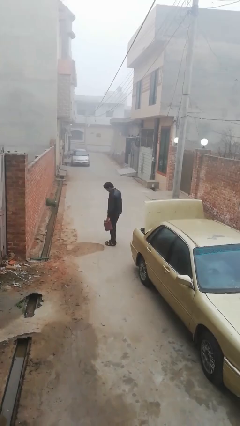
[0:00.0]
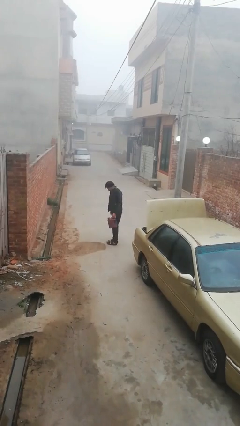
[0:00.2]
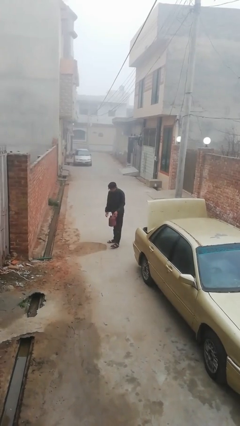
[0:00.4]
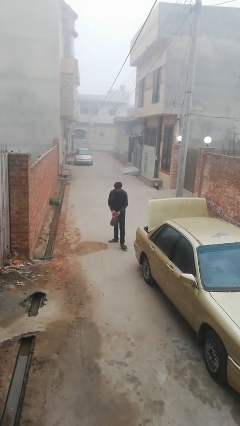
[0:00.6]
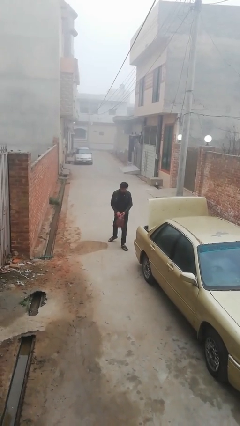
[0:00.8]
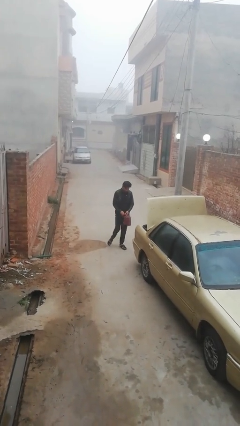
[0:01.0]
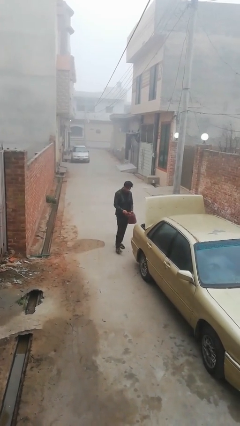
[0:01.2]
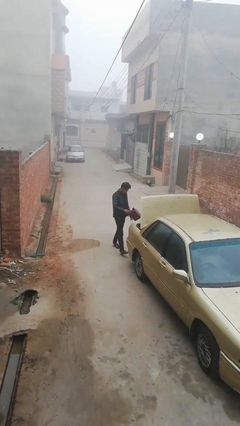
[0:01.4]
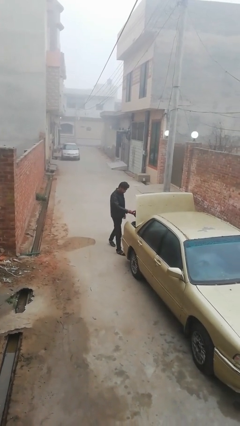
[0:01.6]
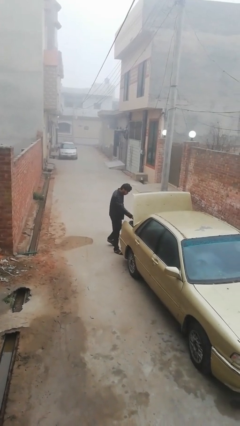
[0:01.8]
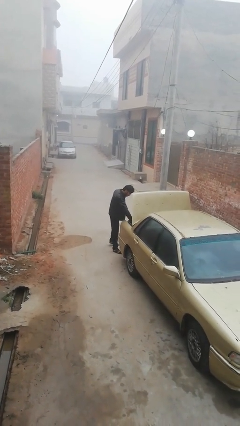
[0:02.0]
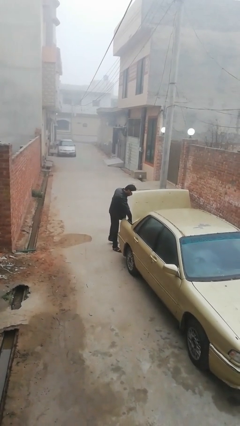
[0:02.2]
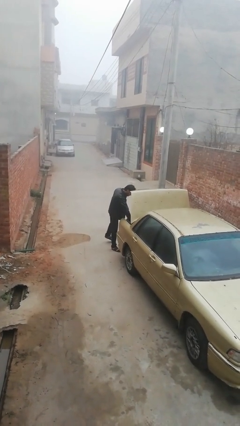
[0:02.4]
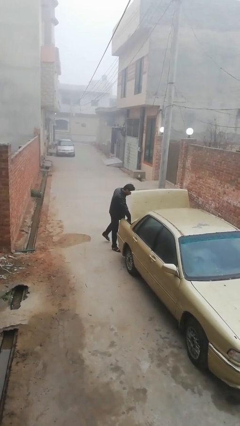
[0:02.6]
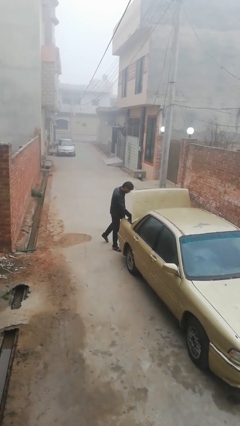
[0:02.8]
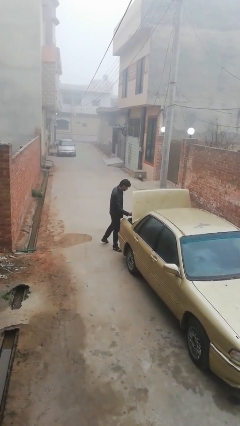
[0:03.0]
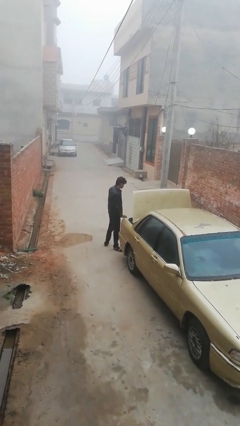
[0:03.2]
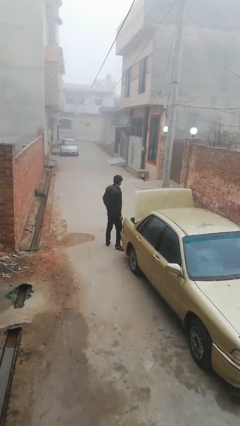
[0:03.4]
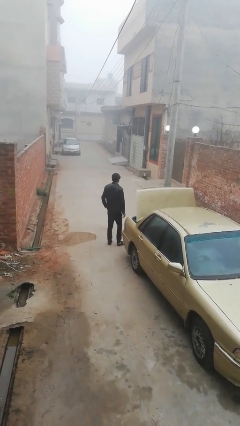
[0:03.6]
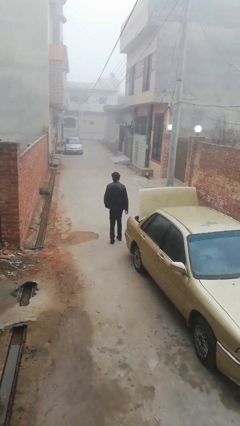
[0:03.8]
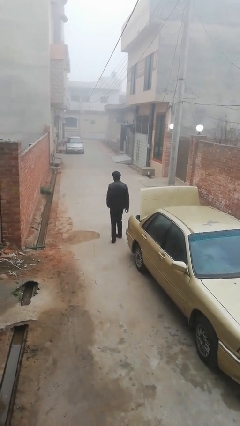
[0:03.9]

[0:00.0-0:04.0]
person loads car

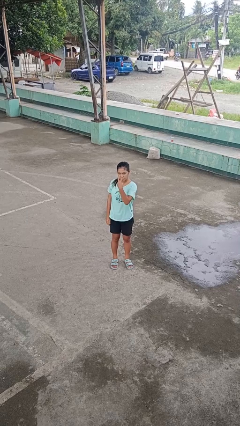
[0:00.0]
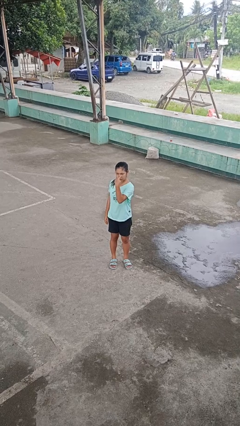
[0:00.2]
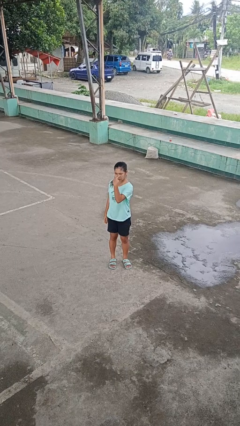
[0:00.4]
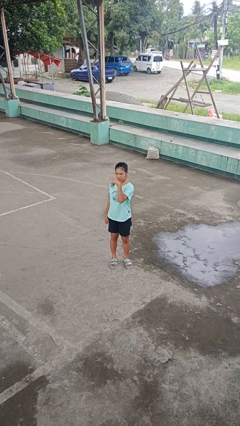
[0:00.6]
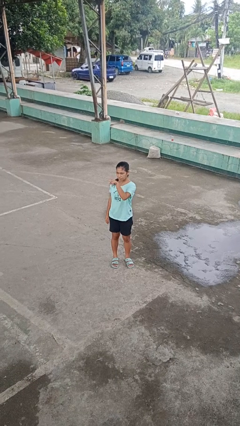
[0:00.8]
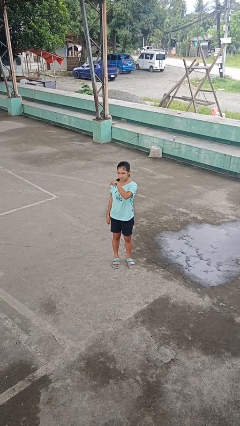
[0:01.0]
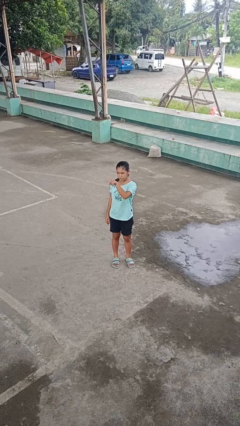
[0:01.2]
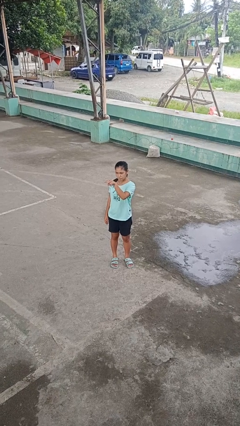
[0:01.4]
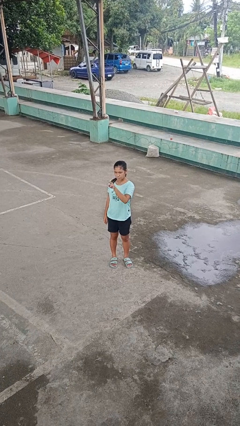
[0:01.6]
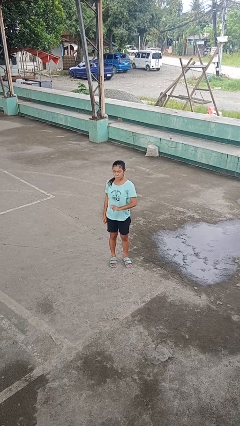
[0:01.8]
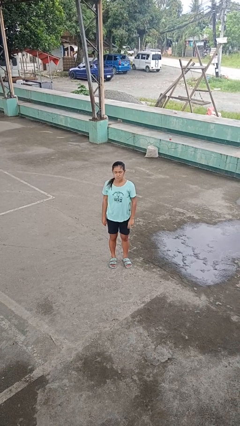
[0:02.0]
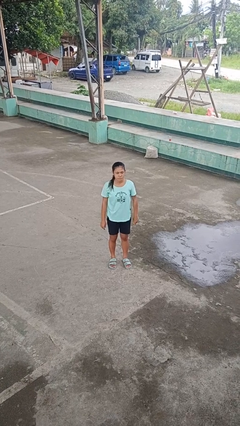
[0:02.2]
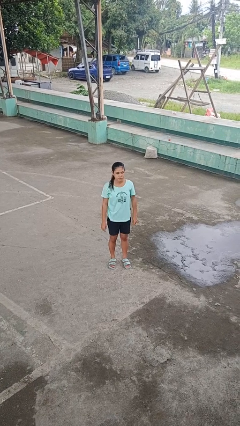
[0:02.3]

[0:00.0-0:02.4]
person gestures watch closely

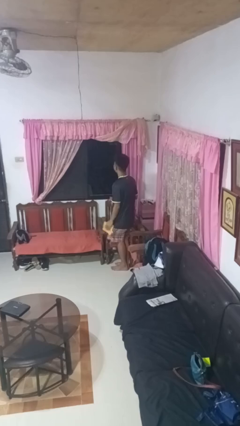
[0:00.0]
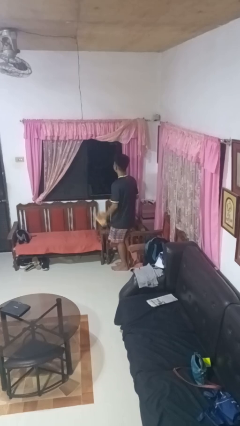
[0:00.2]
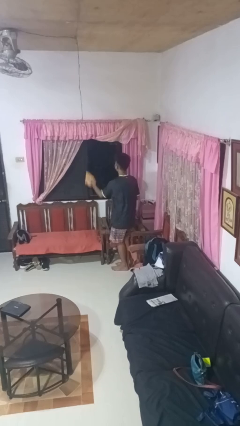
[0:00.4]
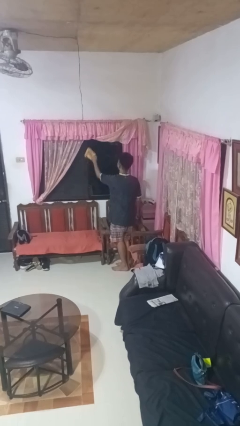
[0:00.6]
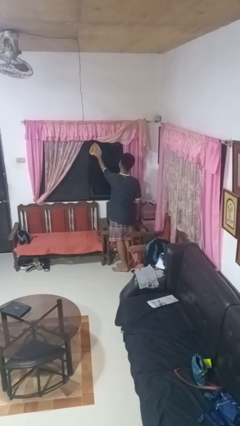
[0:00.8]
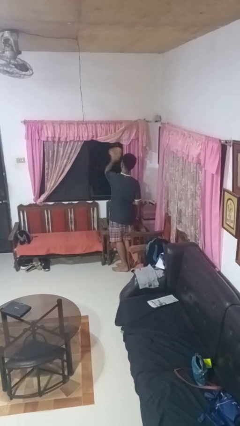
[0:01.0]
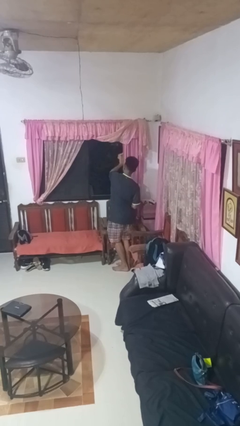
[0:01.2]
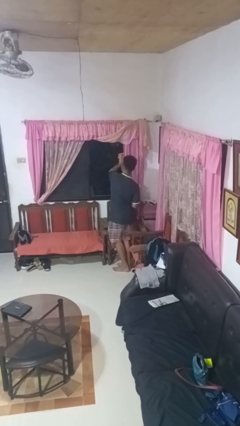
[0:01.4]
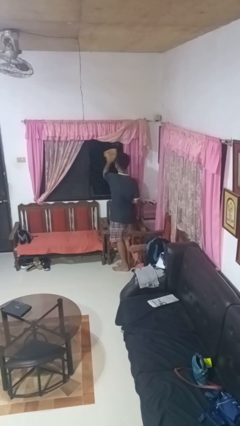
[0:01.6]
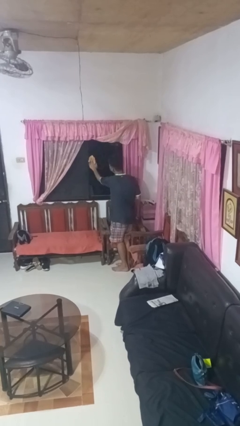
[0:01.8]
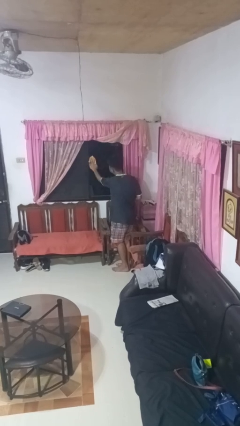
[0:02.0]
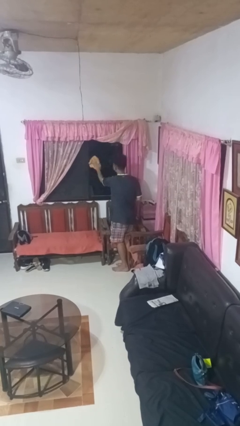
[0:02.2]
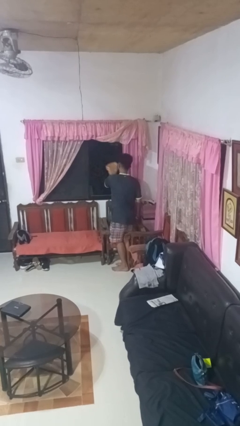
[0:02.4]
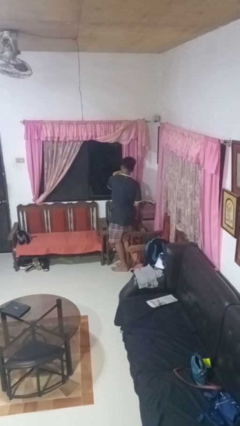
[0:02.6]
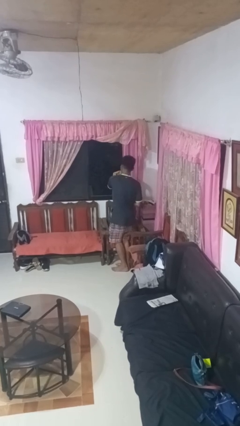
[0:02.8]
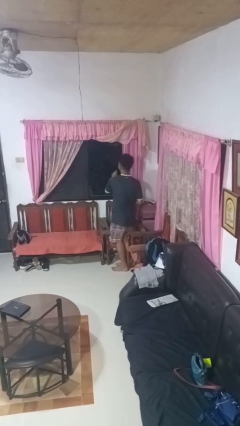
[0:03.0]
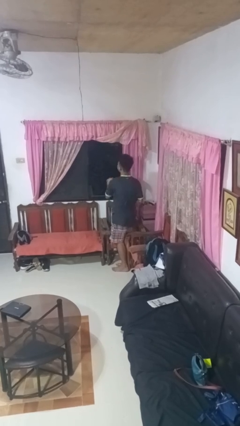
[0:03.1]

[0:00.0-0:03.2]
person washes window

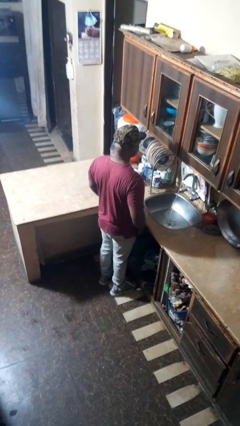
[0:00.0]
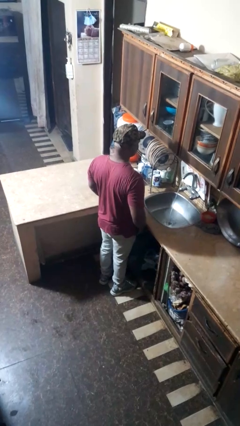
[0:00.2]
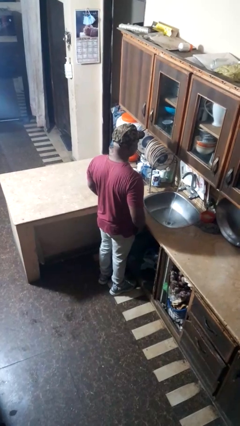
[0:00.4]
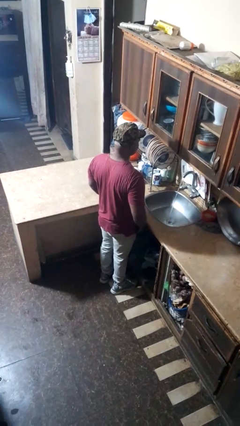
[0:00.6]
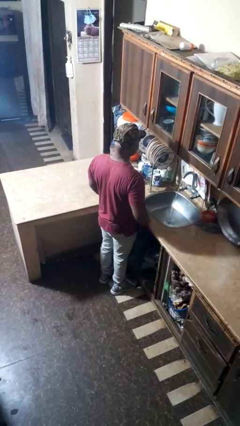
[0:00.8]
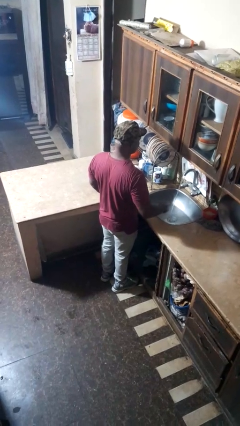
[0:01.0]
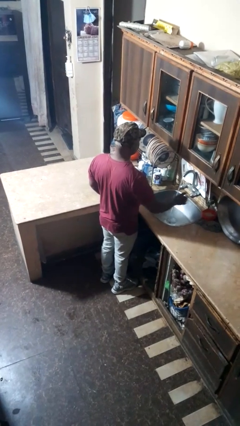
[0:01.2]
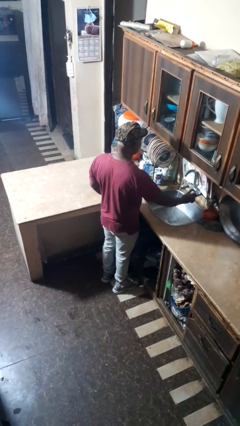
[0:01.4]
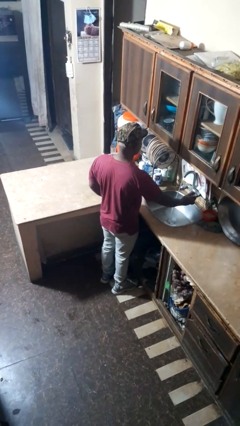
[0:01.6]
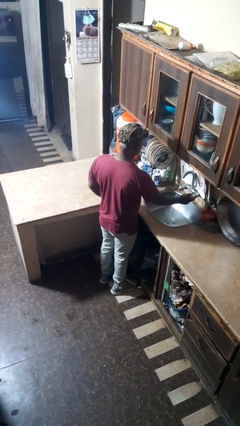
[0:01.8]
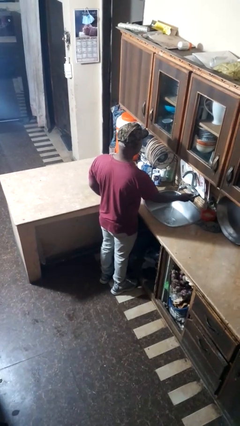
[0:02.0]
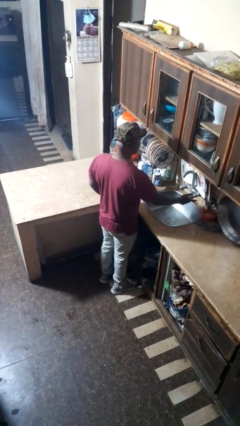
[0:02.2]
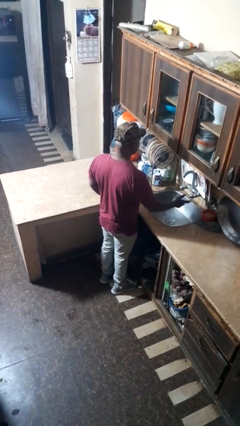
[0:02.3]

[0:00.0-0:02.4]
person turns off faucet

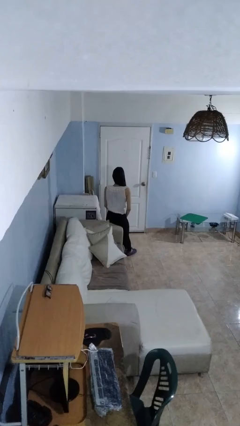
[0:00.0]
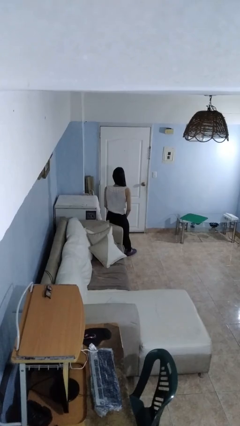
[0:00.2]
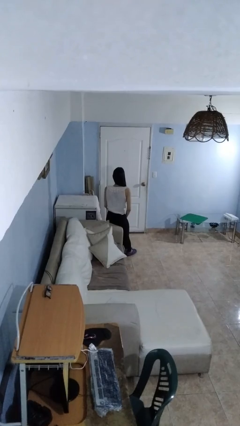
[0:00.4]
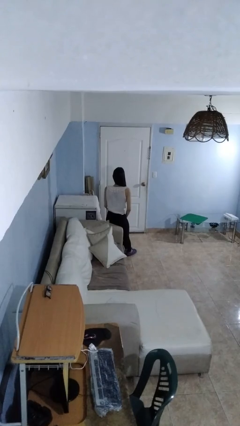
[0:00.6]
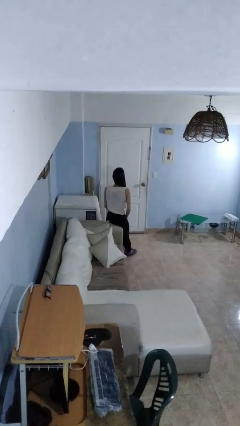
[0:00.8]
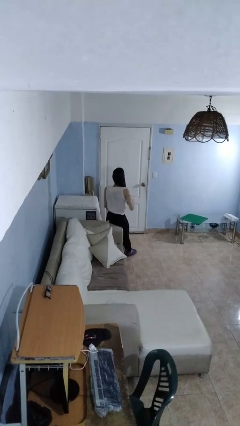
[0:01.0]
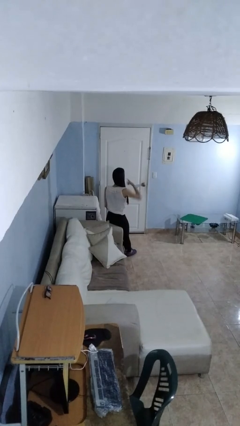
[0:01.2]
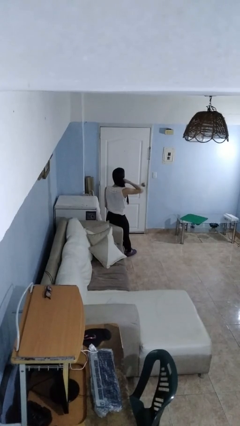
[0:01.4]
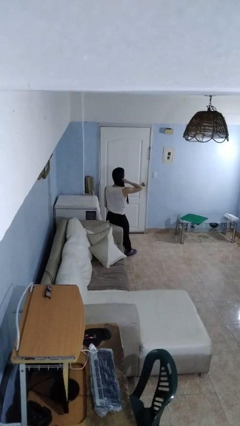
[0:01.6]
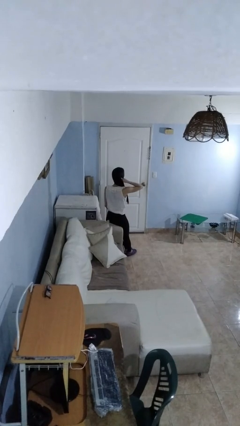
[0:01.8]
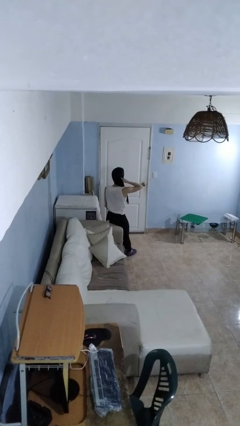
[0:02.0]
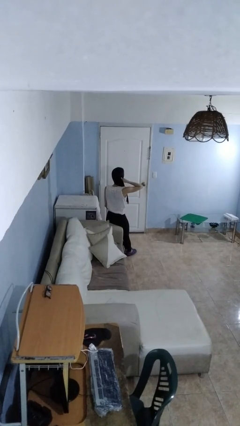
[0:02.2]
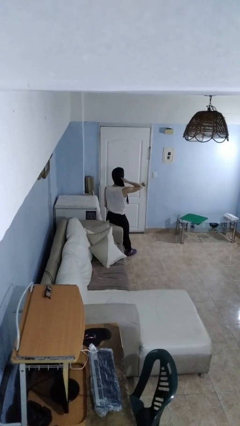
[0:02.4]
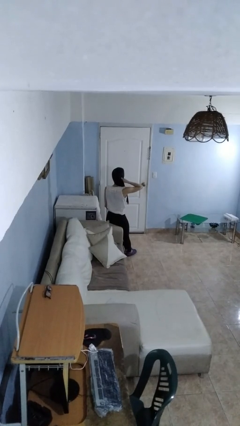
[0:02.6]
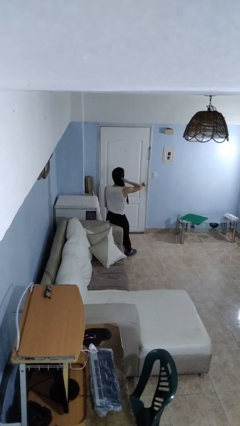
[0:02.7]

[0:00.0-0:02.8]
person gestures call me

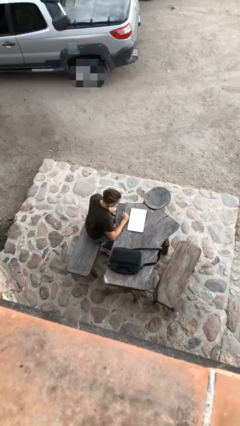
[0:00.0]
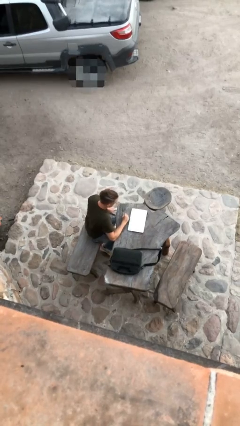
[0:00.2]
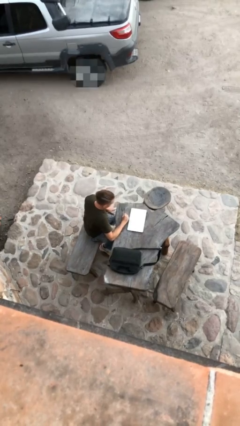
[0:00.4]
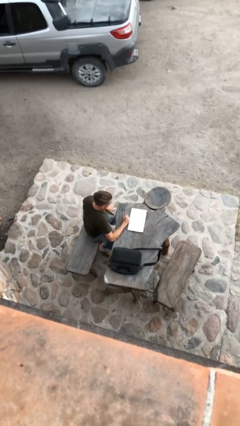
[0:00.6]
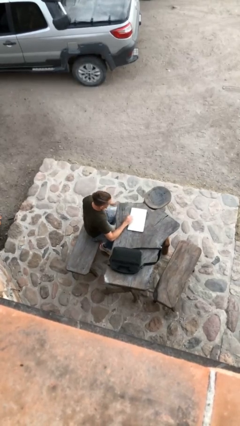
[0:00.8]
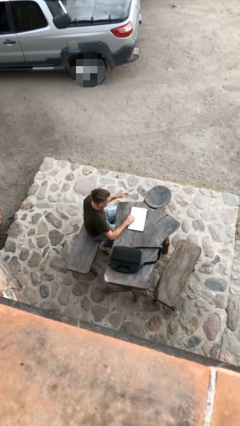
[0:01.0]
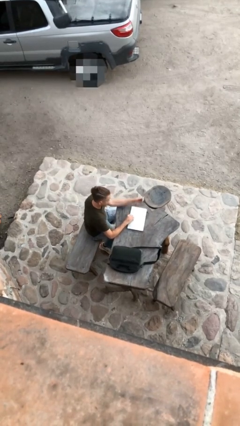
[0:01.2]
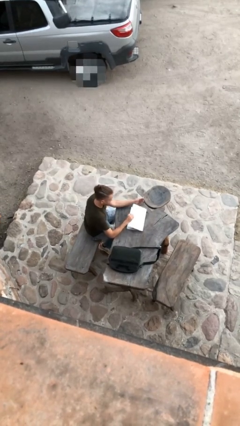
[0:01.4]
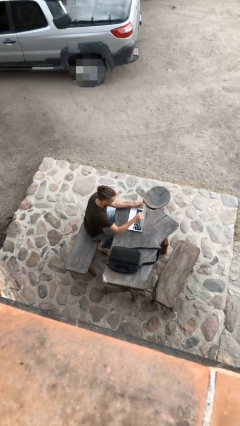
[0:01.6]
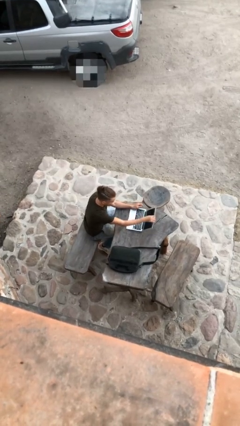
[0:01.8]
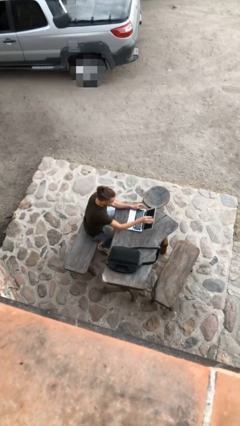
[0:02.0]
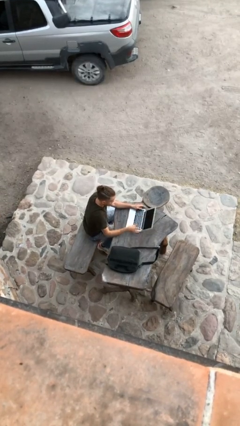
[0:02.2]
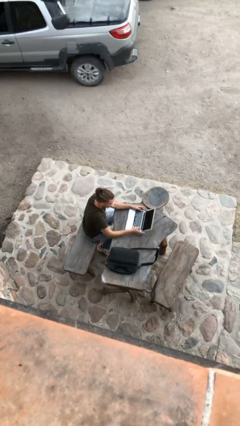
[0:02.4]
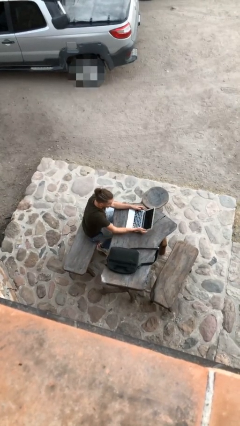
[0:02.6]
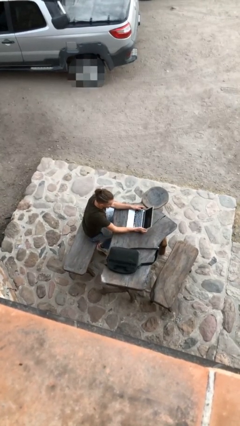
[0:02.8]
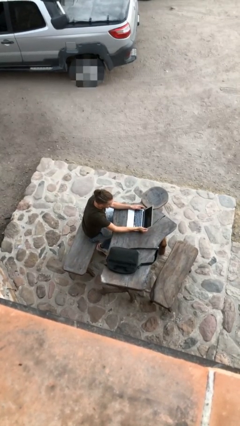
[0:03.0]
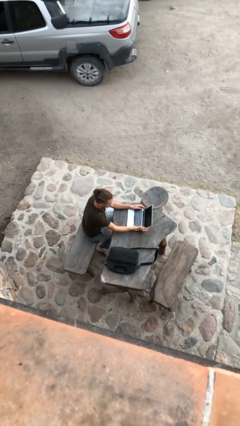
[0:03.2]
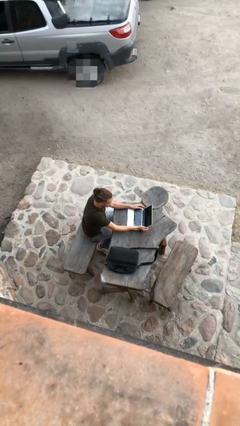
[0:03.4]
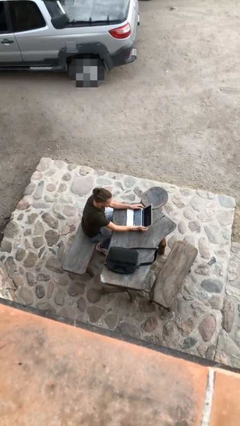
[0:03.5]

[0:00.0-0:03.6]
person interacts with laptop
